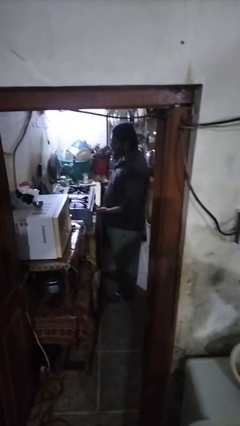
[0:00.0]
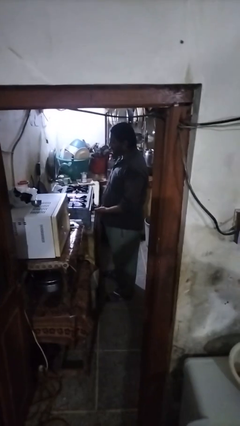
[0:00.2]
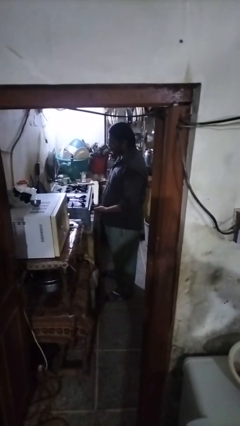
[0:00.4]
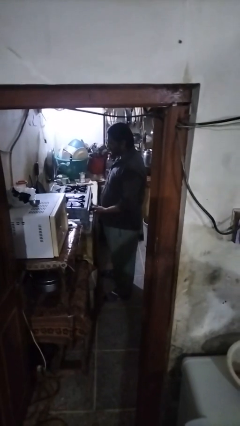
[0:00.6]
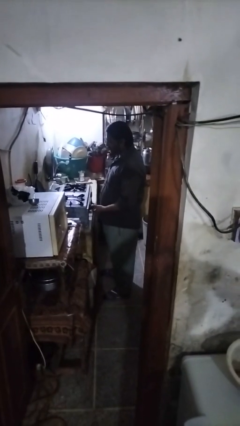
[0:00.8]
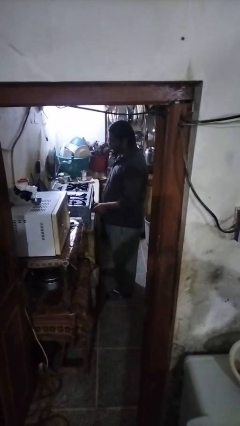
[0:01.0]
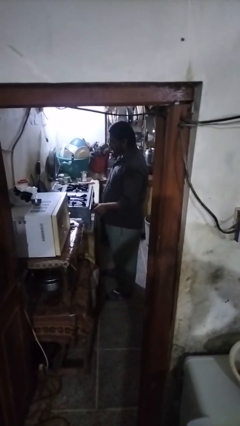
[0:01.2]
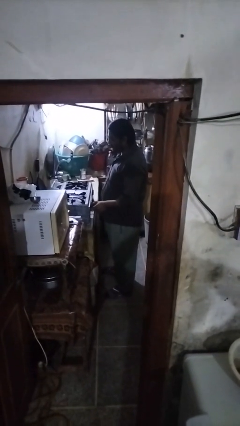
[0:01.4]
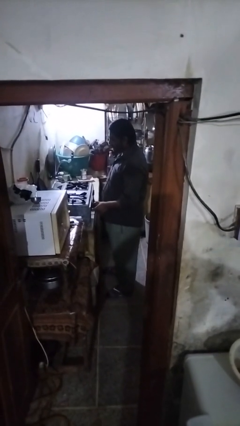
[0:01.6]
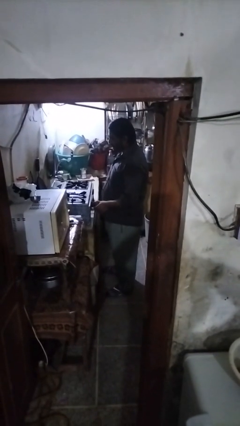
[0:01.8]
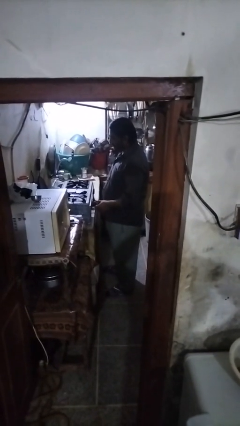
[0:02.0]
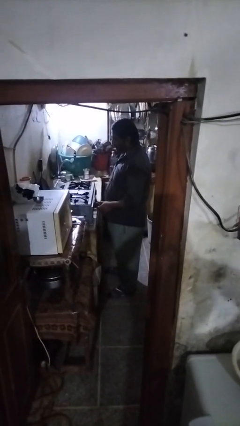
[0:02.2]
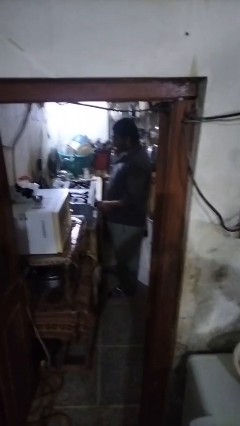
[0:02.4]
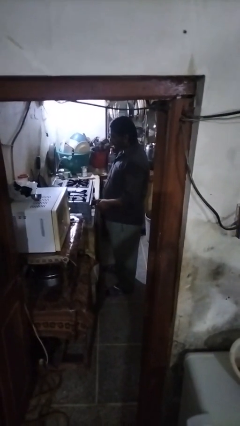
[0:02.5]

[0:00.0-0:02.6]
person turns off stovetop

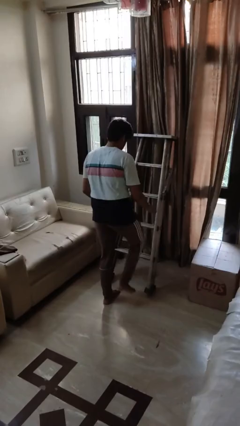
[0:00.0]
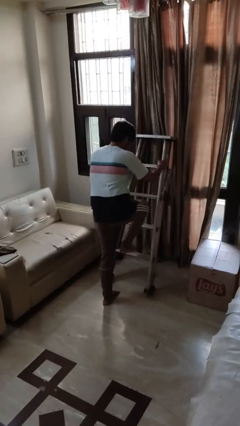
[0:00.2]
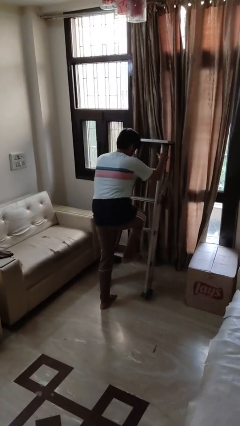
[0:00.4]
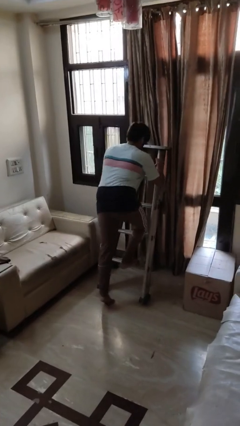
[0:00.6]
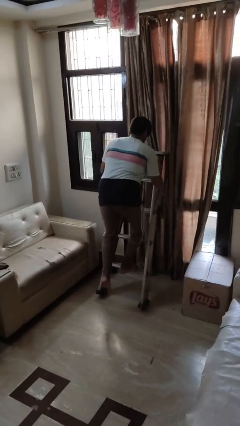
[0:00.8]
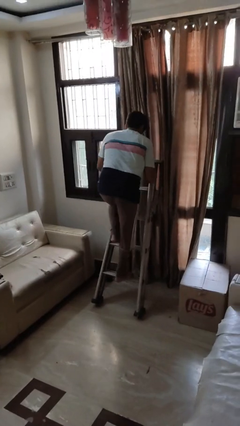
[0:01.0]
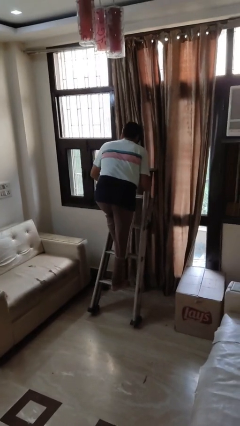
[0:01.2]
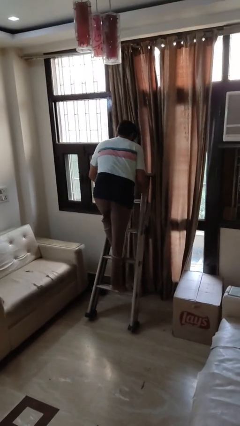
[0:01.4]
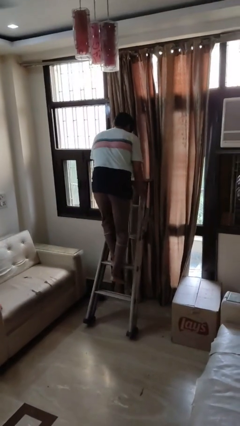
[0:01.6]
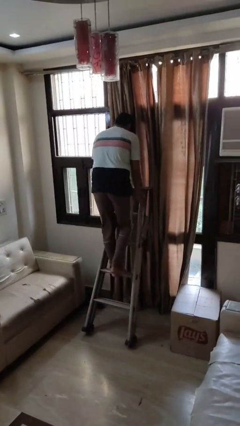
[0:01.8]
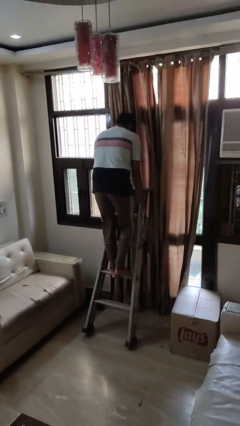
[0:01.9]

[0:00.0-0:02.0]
person climbs up ladder

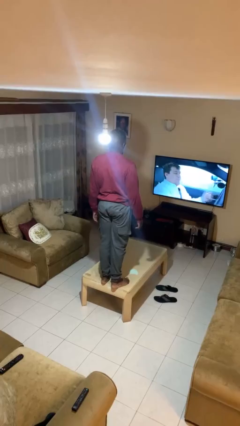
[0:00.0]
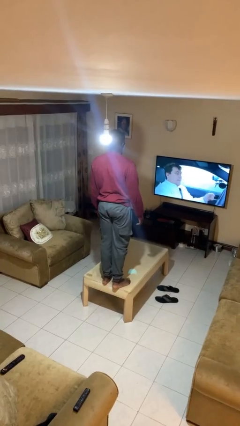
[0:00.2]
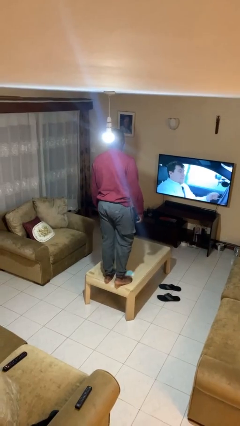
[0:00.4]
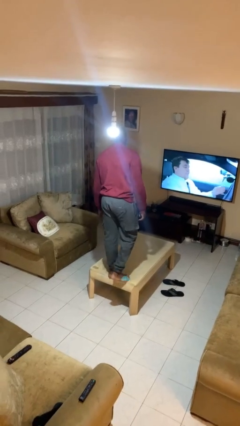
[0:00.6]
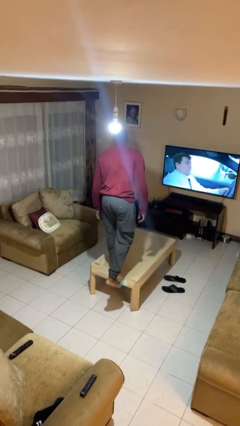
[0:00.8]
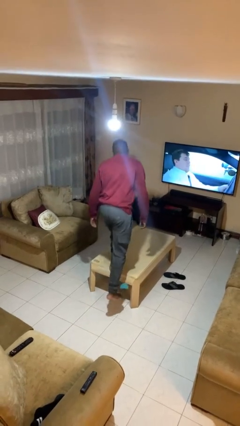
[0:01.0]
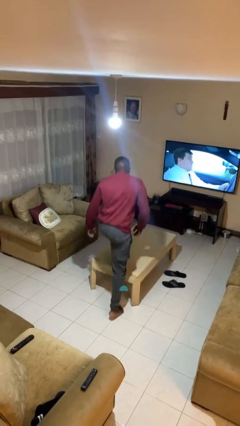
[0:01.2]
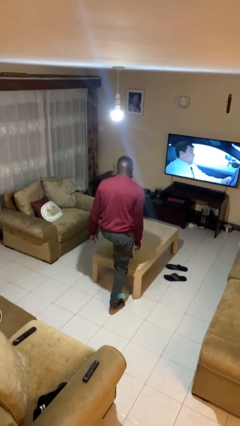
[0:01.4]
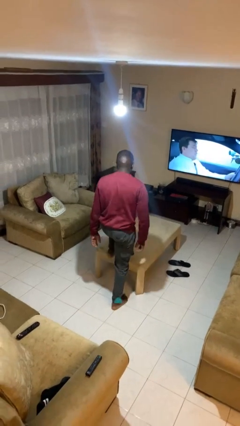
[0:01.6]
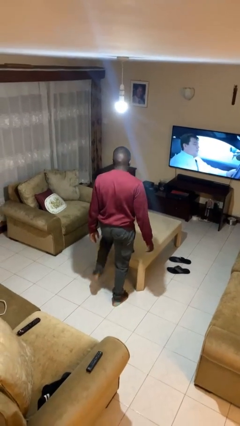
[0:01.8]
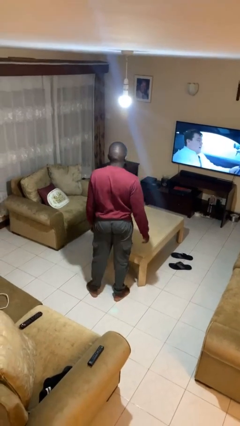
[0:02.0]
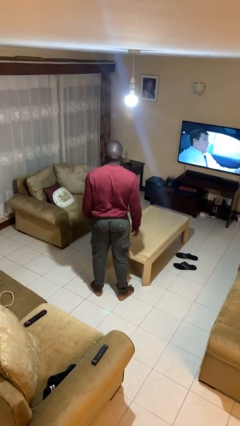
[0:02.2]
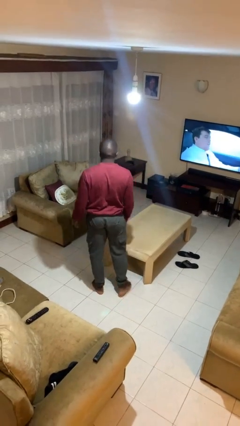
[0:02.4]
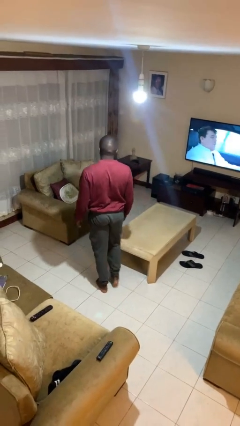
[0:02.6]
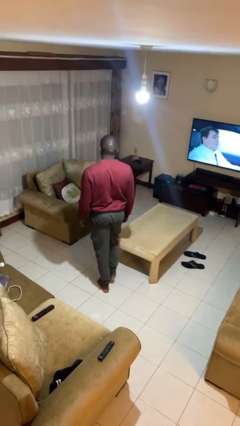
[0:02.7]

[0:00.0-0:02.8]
person climbs off table

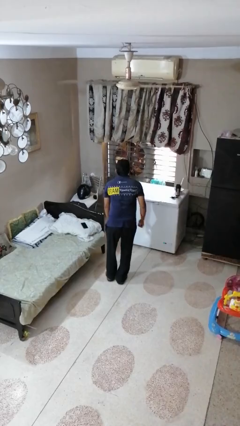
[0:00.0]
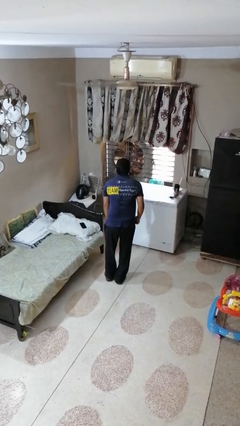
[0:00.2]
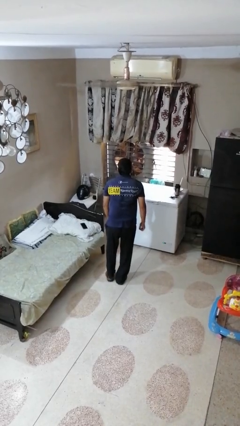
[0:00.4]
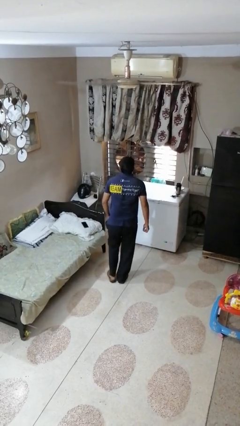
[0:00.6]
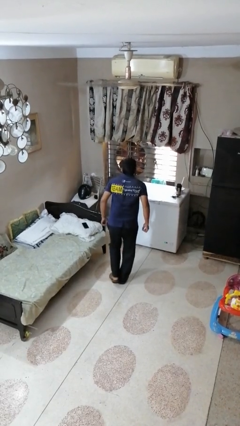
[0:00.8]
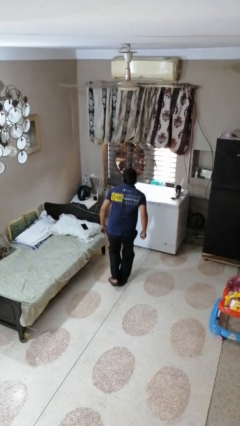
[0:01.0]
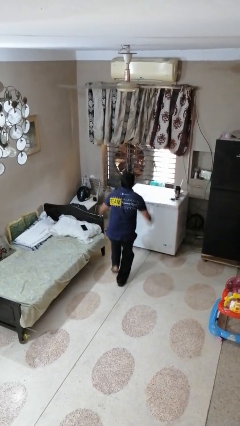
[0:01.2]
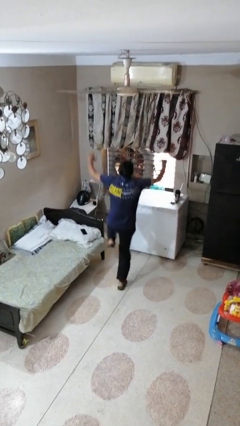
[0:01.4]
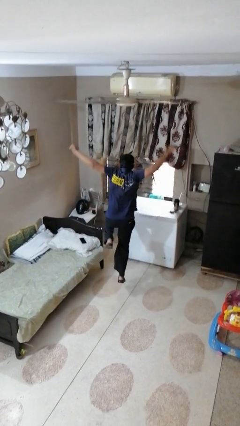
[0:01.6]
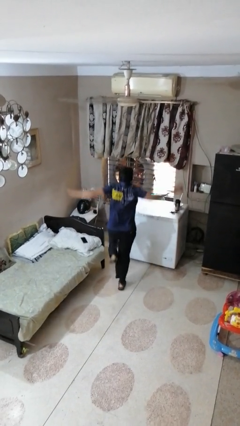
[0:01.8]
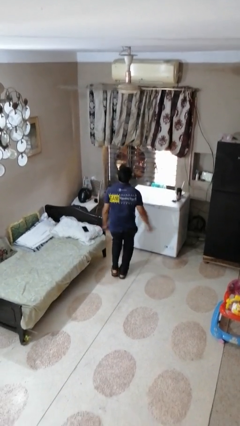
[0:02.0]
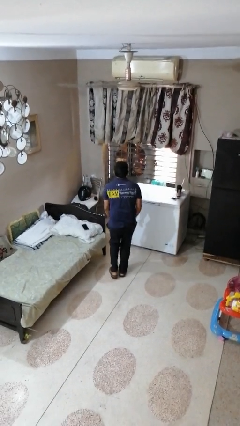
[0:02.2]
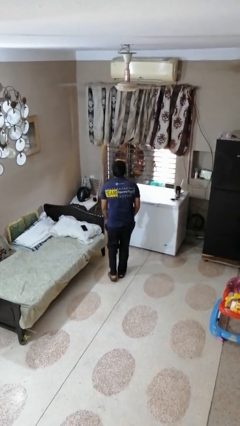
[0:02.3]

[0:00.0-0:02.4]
person jumps

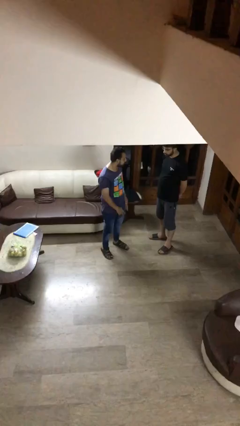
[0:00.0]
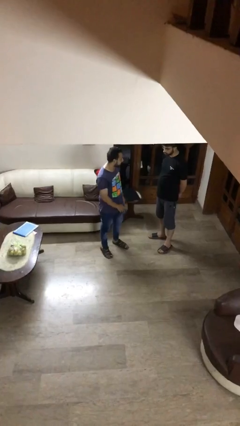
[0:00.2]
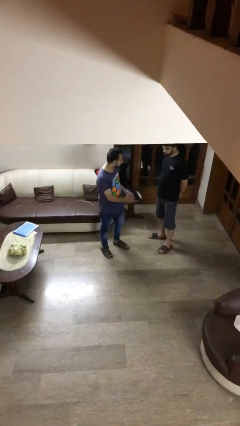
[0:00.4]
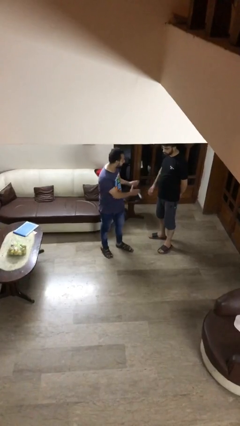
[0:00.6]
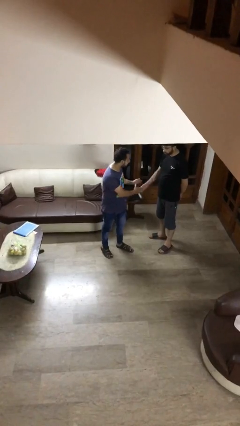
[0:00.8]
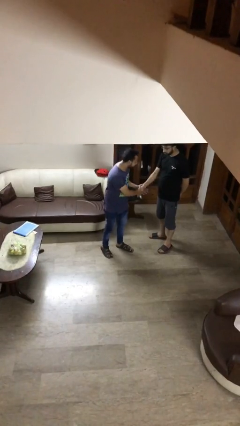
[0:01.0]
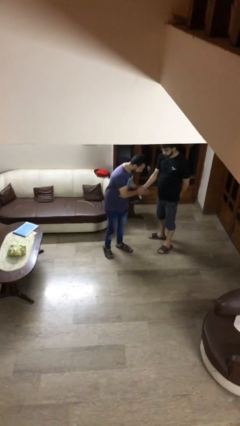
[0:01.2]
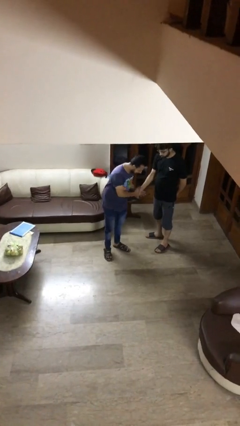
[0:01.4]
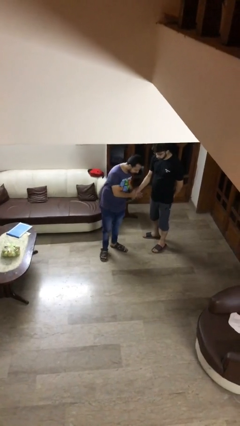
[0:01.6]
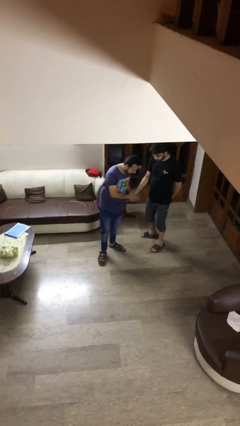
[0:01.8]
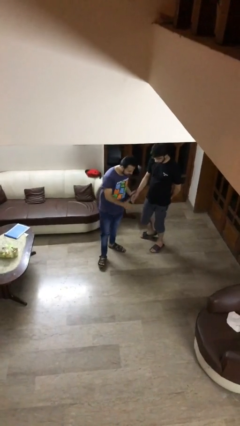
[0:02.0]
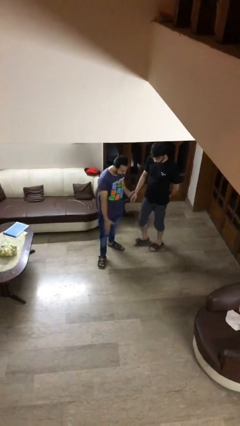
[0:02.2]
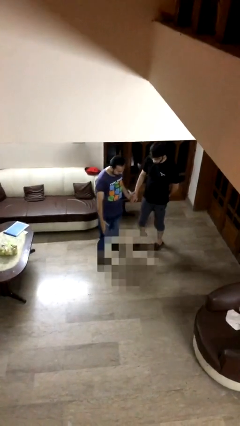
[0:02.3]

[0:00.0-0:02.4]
person shakes hand

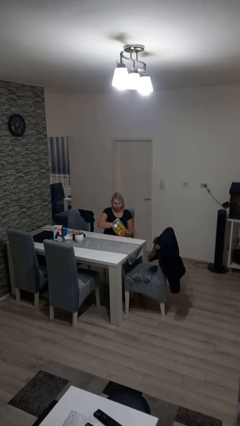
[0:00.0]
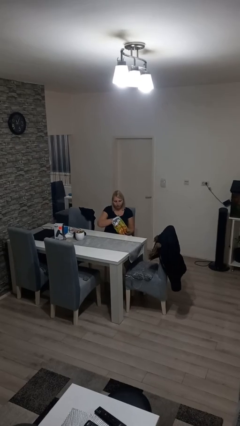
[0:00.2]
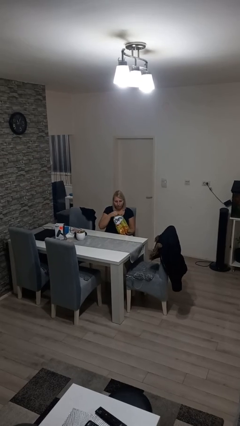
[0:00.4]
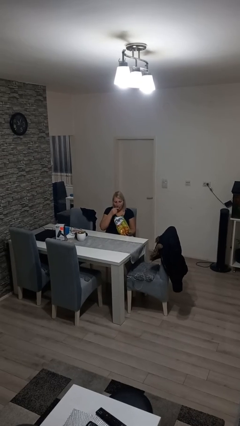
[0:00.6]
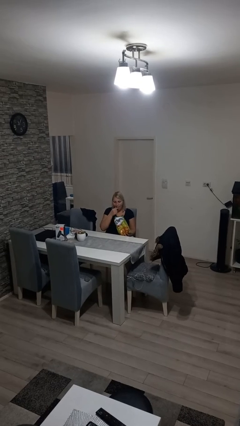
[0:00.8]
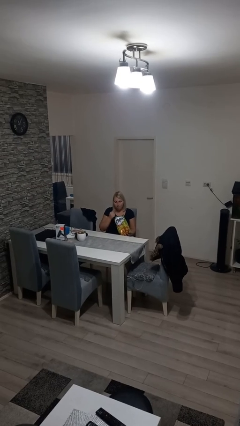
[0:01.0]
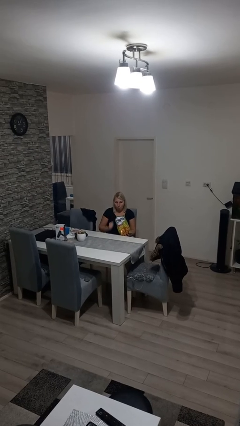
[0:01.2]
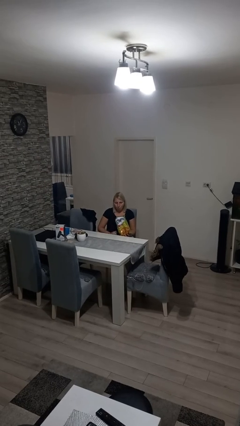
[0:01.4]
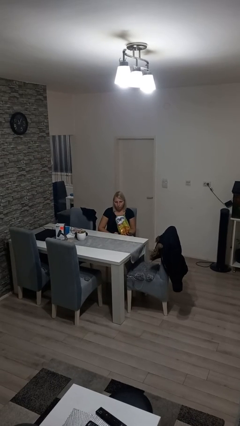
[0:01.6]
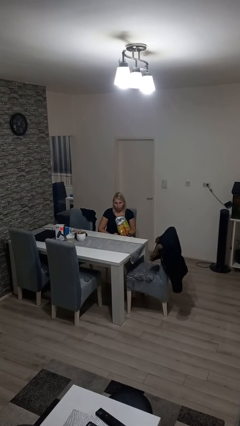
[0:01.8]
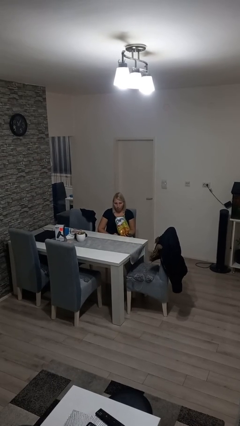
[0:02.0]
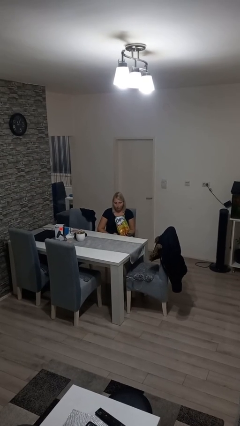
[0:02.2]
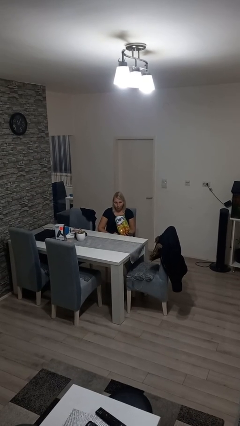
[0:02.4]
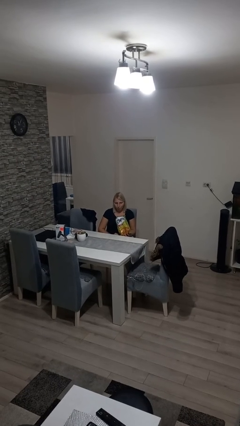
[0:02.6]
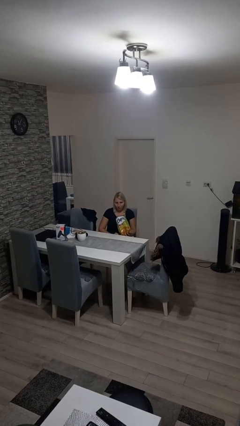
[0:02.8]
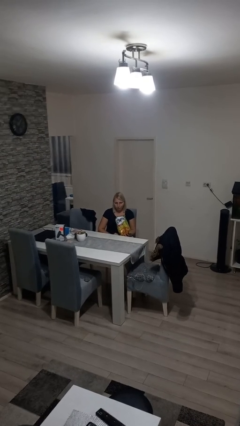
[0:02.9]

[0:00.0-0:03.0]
person eats snack from bag

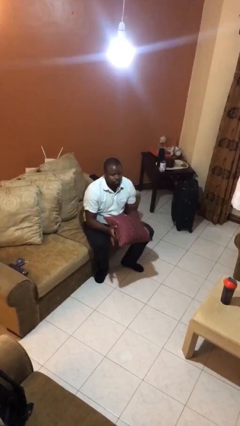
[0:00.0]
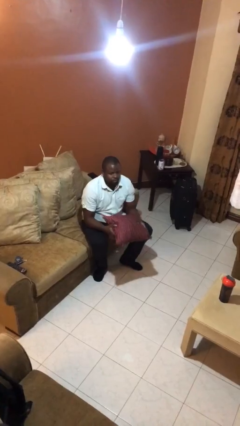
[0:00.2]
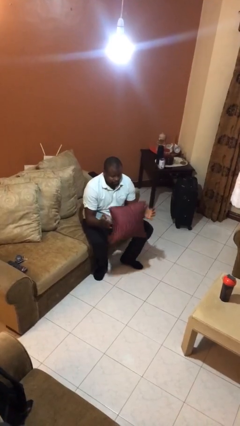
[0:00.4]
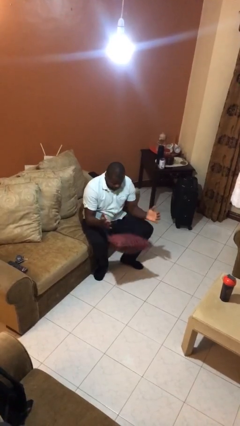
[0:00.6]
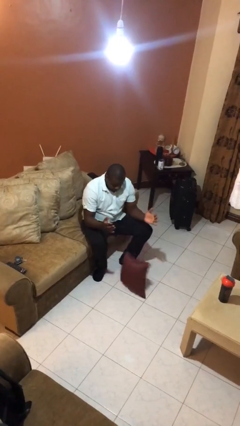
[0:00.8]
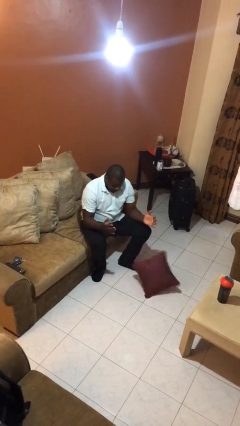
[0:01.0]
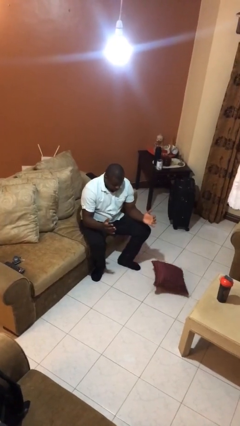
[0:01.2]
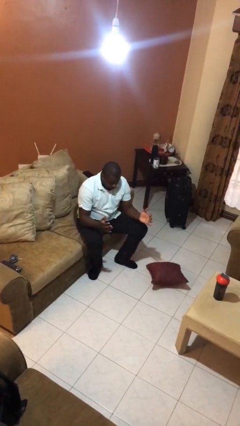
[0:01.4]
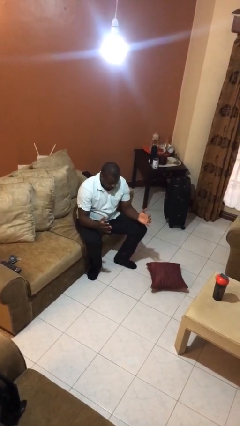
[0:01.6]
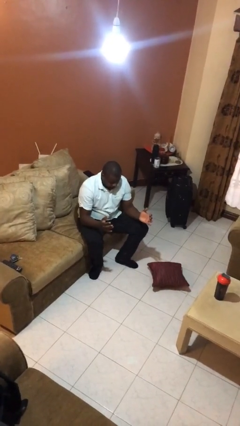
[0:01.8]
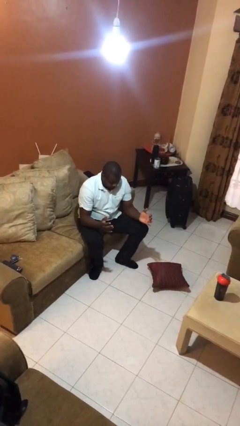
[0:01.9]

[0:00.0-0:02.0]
person drops object
